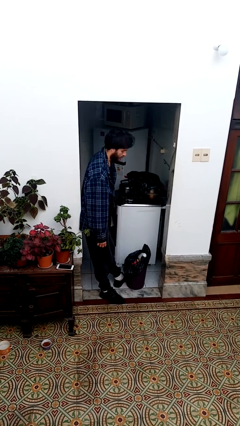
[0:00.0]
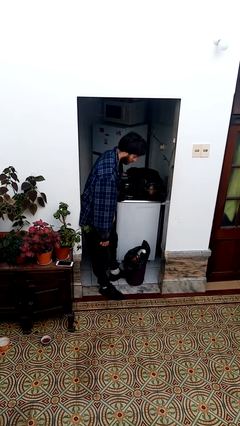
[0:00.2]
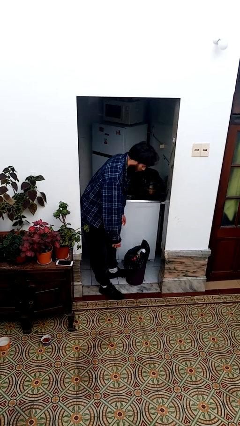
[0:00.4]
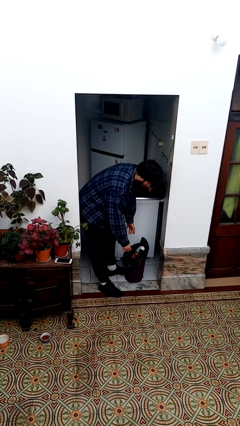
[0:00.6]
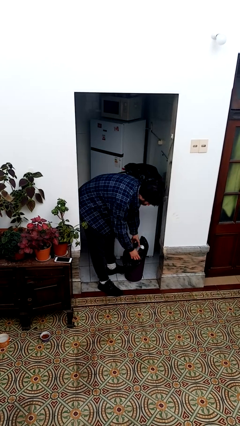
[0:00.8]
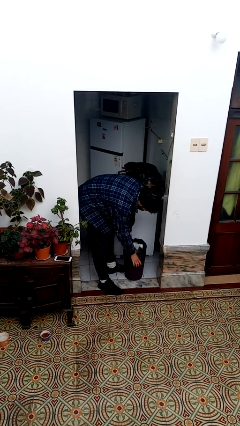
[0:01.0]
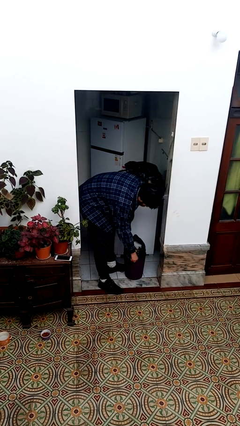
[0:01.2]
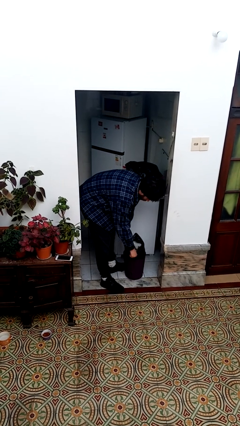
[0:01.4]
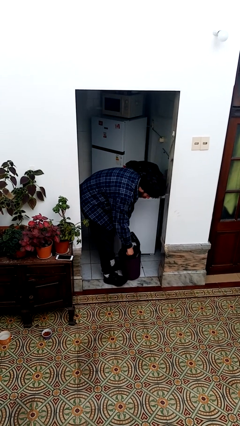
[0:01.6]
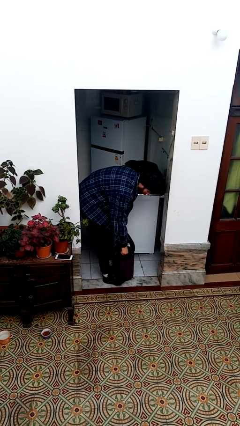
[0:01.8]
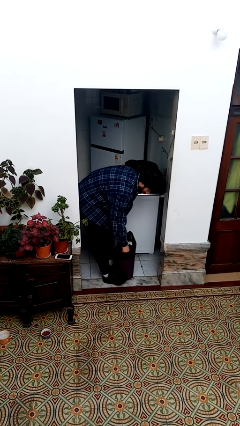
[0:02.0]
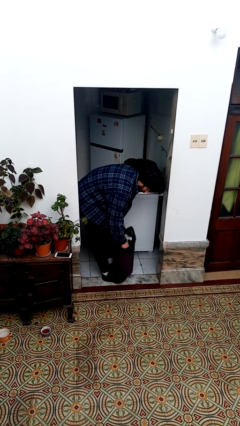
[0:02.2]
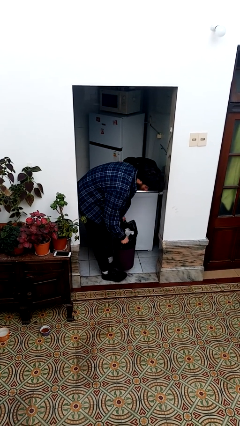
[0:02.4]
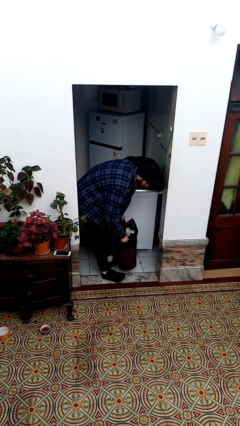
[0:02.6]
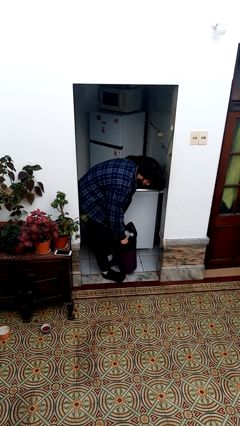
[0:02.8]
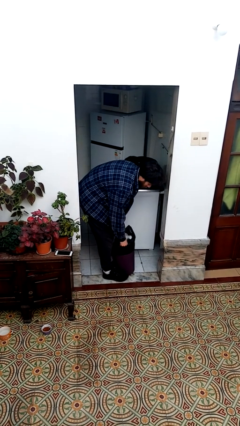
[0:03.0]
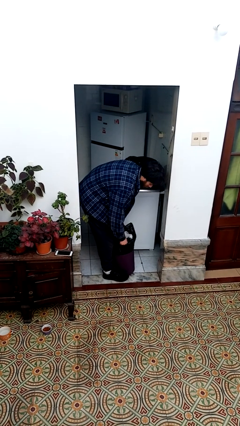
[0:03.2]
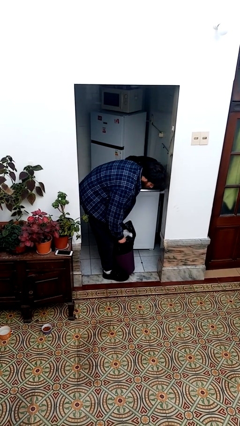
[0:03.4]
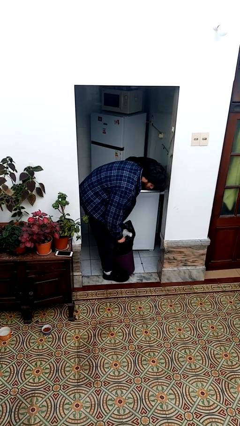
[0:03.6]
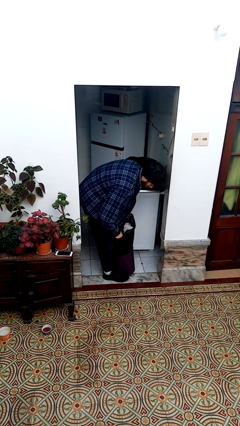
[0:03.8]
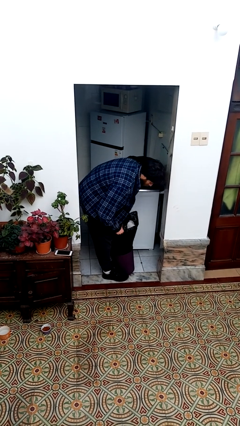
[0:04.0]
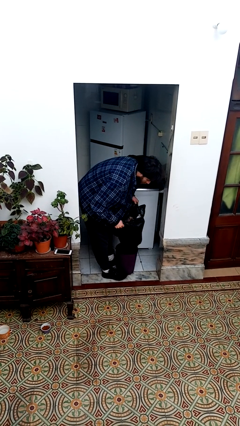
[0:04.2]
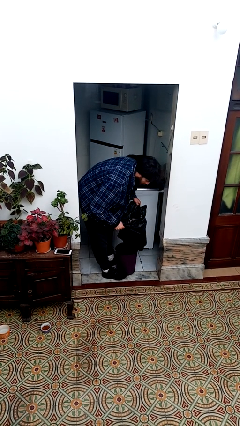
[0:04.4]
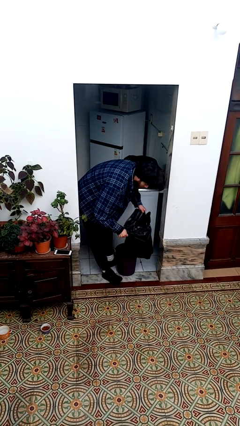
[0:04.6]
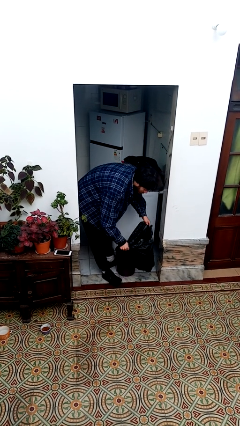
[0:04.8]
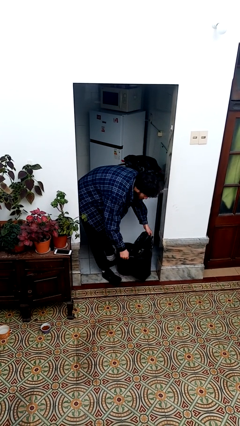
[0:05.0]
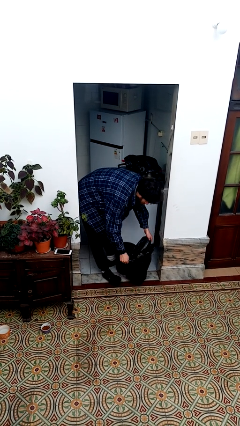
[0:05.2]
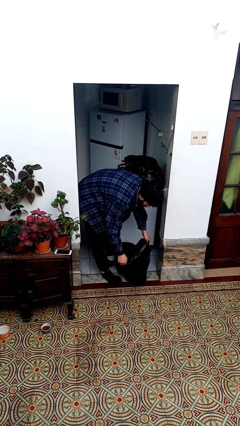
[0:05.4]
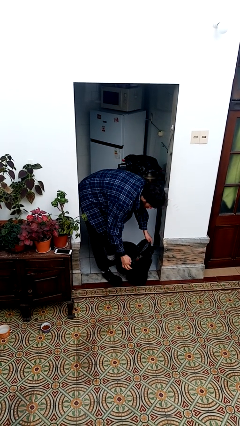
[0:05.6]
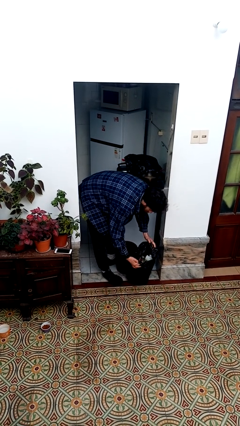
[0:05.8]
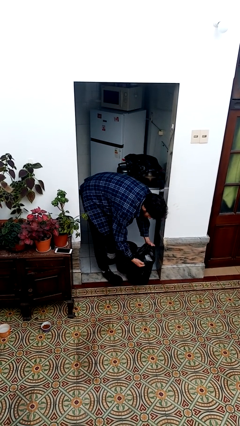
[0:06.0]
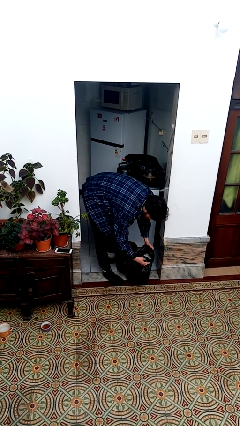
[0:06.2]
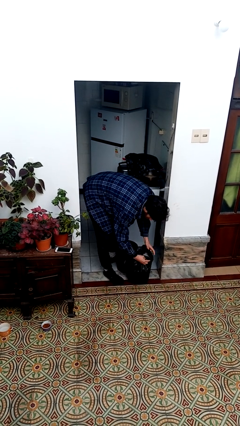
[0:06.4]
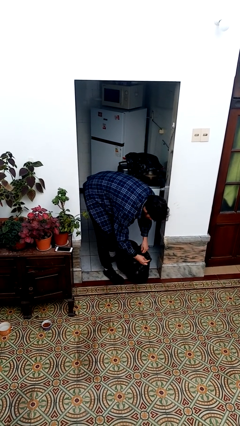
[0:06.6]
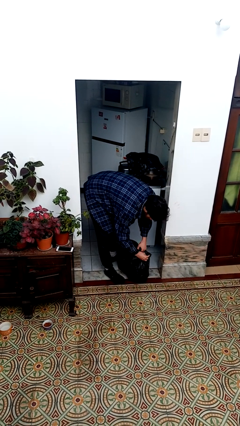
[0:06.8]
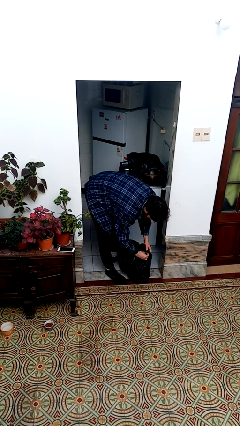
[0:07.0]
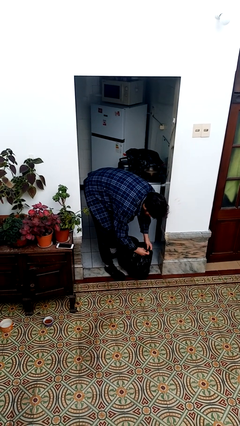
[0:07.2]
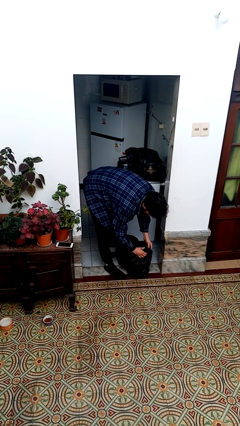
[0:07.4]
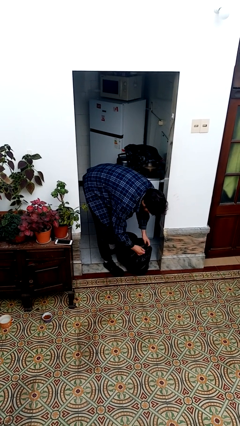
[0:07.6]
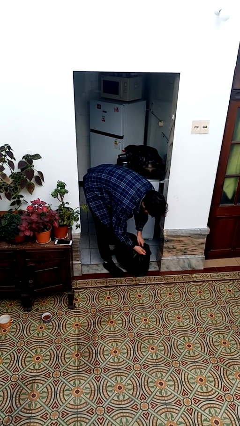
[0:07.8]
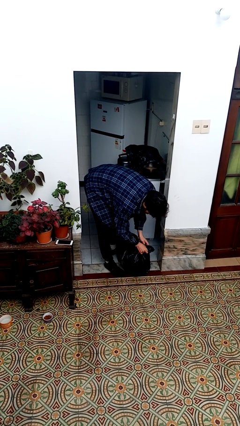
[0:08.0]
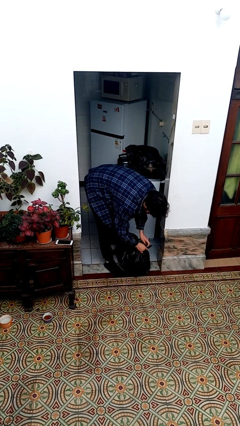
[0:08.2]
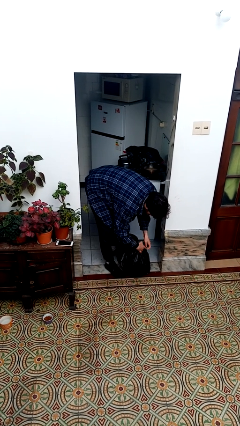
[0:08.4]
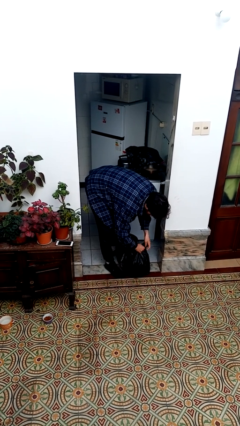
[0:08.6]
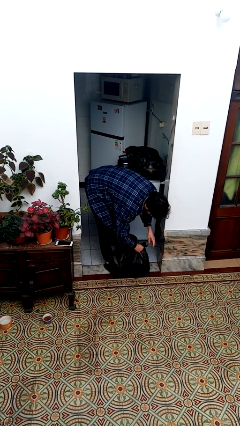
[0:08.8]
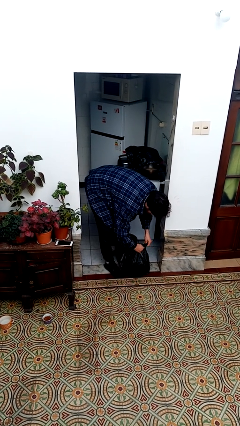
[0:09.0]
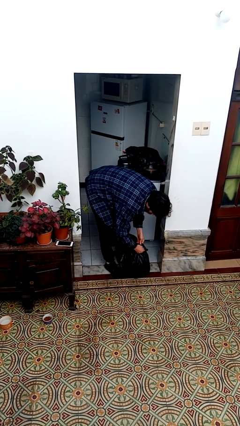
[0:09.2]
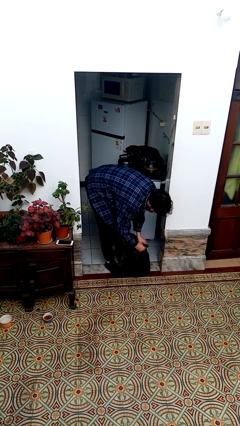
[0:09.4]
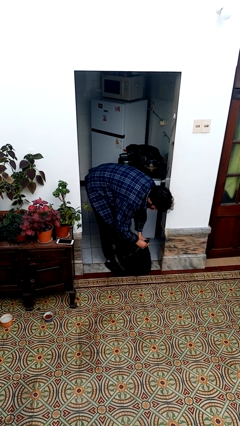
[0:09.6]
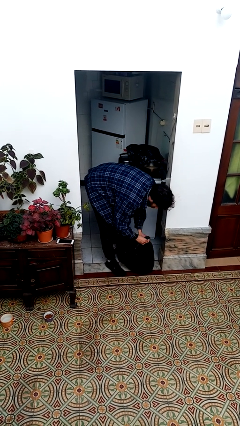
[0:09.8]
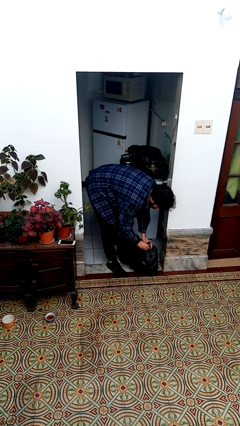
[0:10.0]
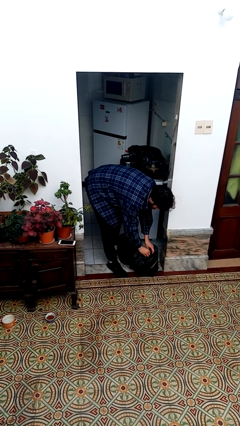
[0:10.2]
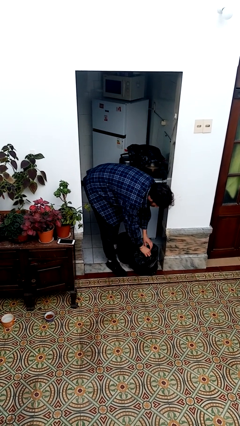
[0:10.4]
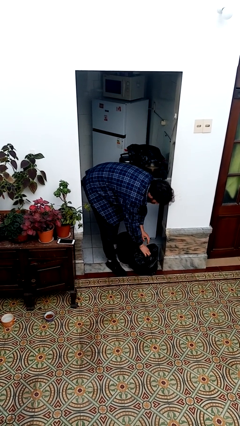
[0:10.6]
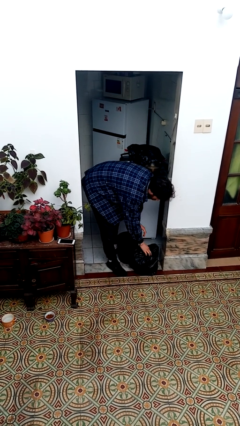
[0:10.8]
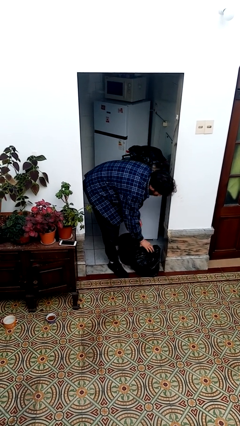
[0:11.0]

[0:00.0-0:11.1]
person removes trashbag from trashcan

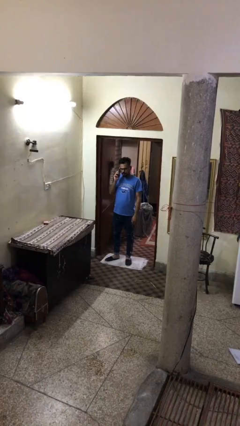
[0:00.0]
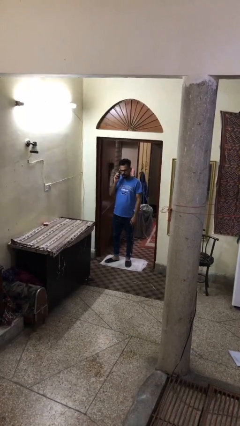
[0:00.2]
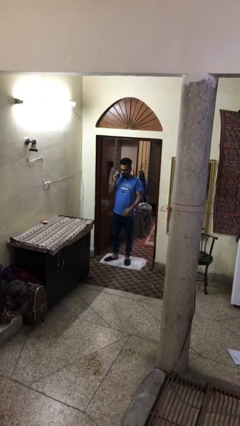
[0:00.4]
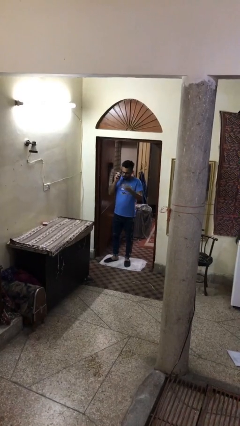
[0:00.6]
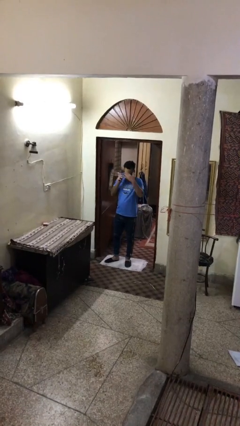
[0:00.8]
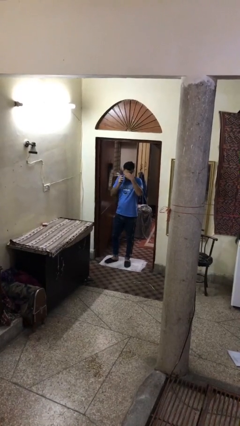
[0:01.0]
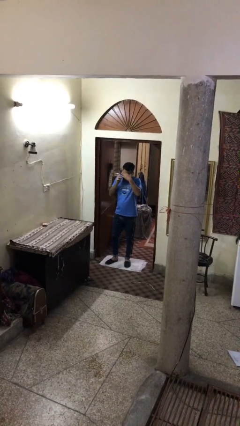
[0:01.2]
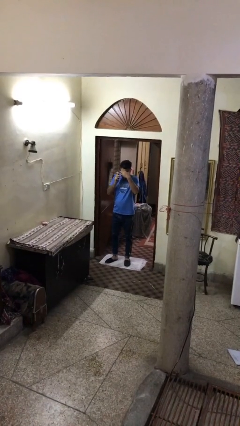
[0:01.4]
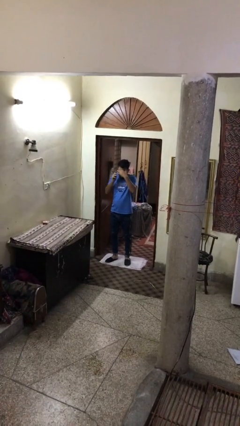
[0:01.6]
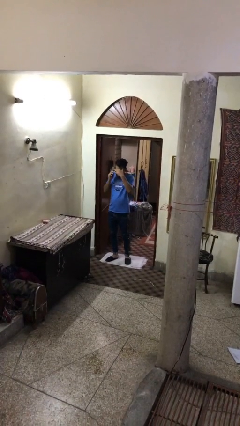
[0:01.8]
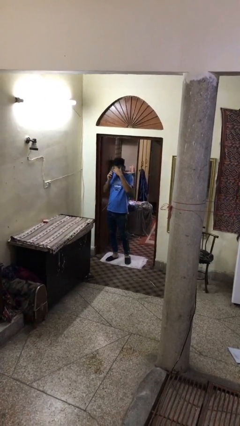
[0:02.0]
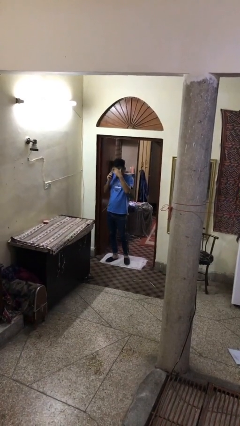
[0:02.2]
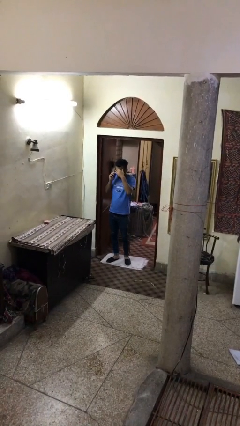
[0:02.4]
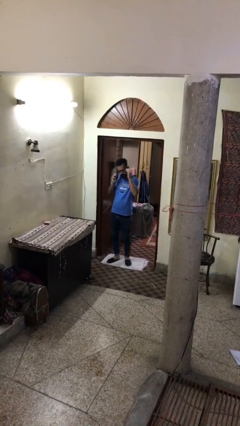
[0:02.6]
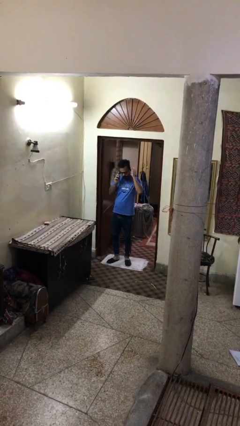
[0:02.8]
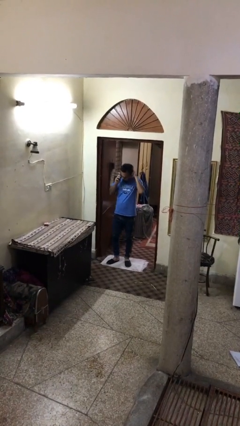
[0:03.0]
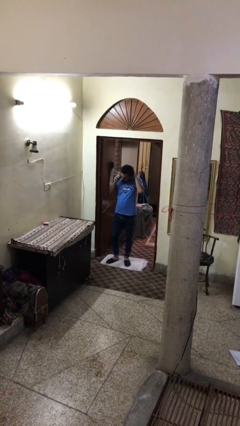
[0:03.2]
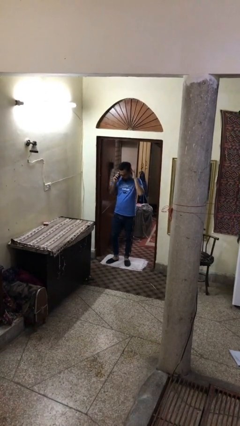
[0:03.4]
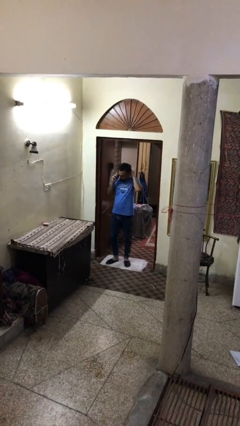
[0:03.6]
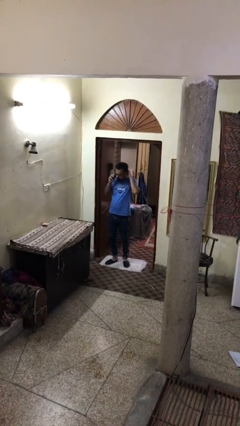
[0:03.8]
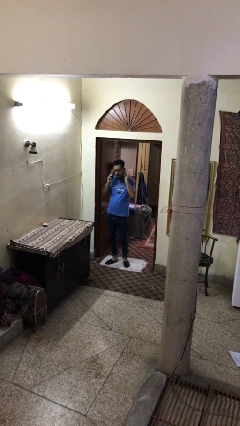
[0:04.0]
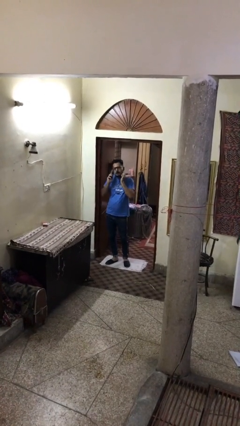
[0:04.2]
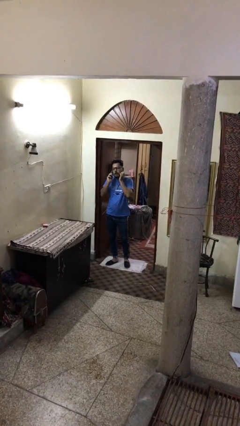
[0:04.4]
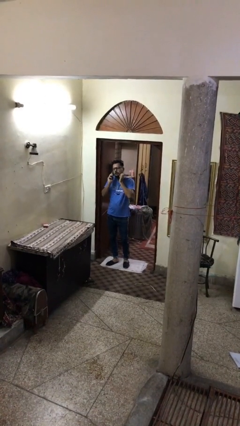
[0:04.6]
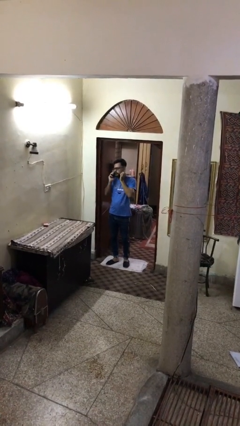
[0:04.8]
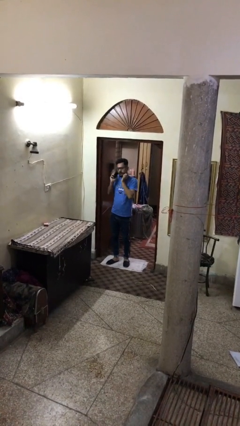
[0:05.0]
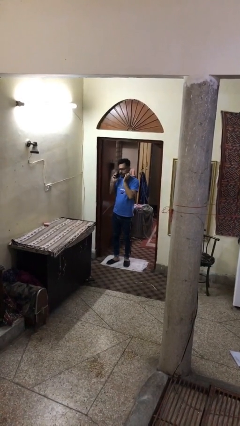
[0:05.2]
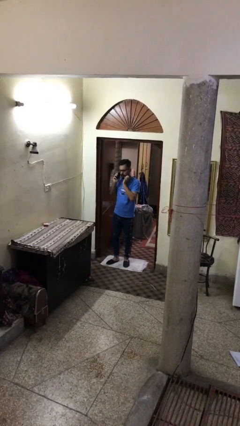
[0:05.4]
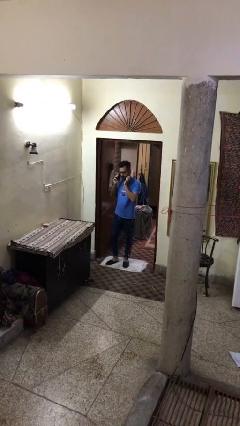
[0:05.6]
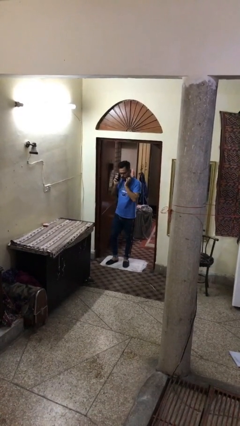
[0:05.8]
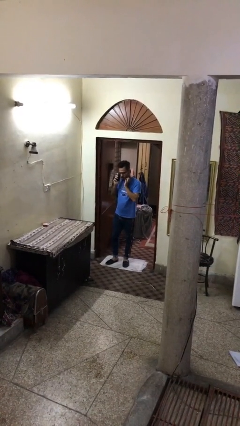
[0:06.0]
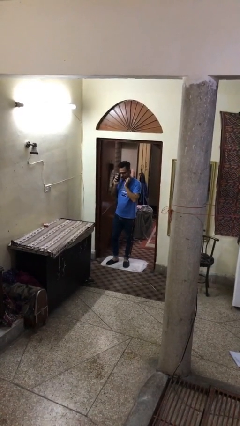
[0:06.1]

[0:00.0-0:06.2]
person talks on phone

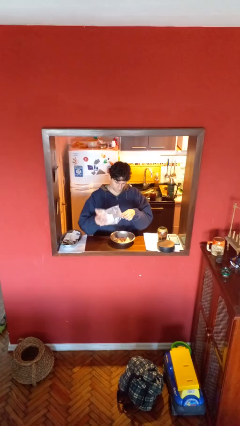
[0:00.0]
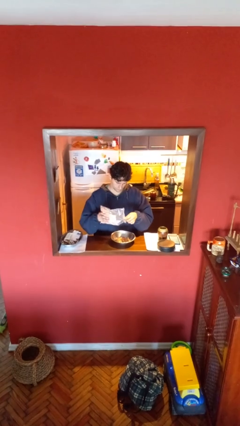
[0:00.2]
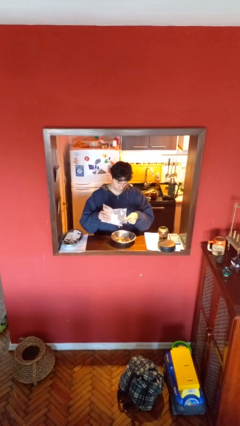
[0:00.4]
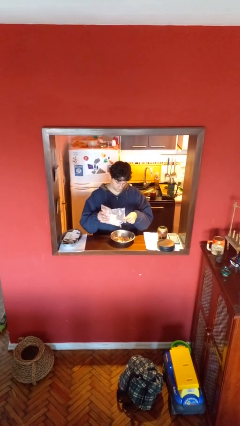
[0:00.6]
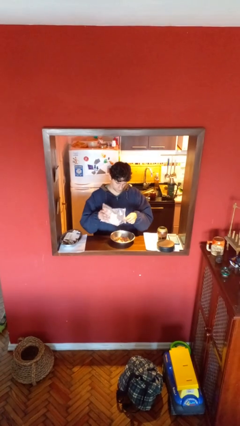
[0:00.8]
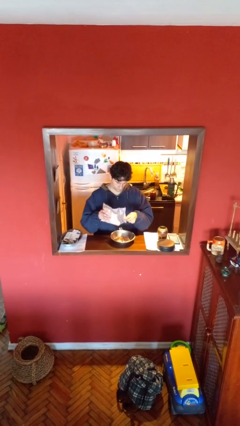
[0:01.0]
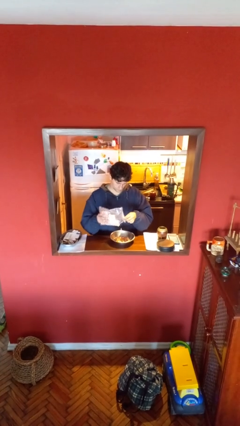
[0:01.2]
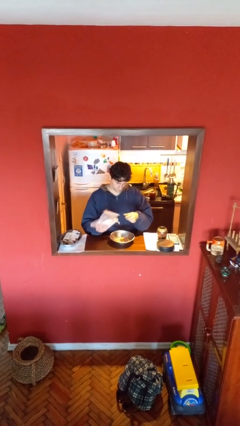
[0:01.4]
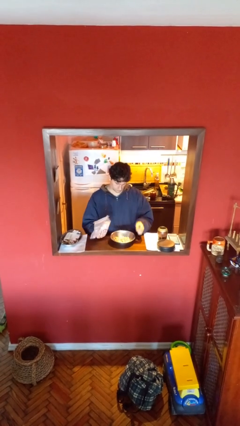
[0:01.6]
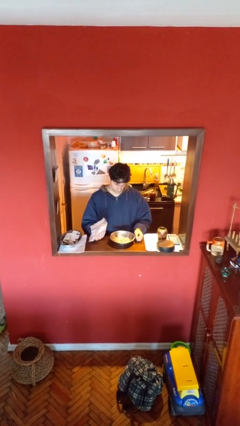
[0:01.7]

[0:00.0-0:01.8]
person pours into bowl
